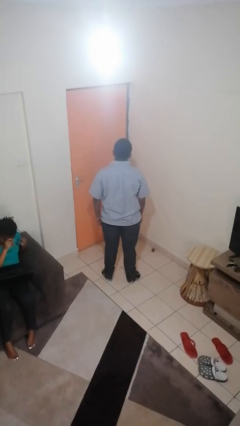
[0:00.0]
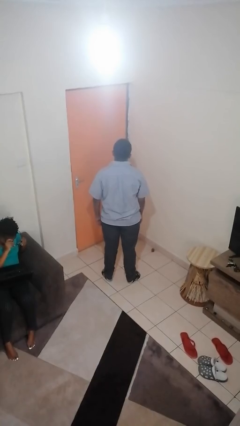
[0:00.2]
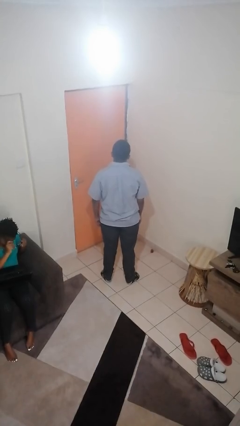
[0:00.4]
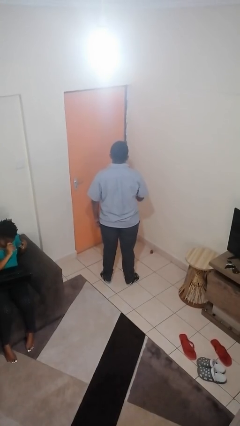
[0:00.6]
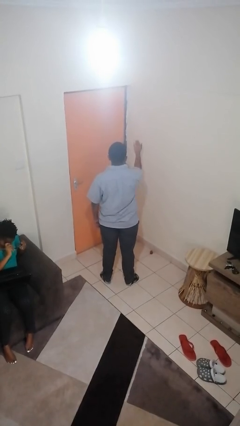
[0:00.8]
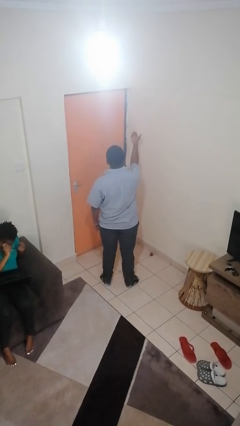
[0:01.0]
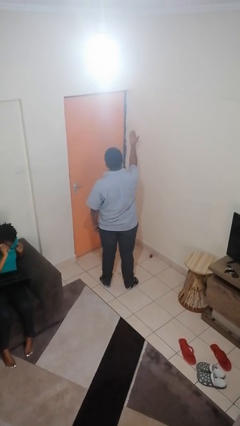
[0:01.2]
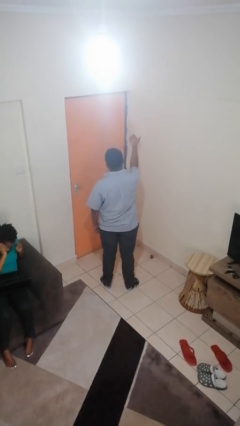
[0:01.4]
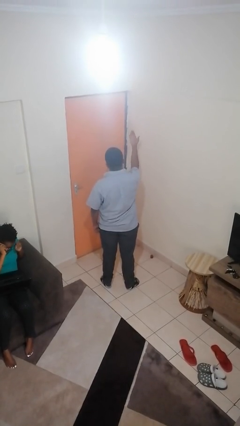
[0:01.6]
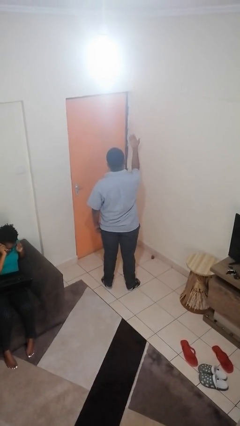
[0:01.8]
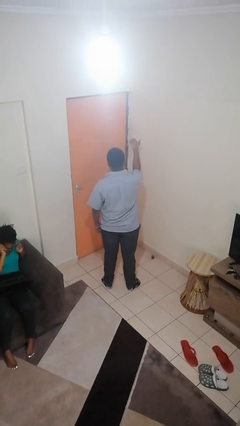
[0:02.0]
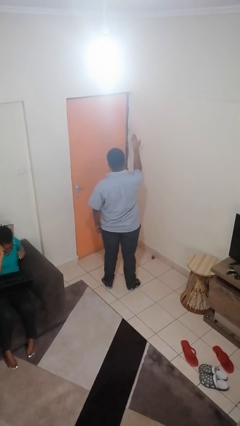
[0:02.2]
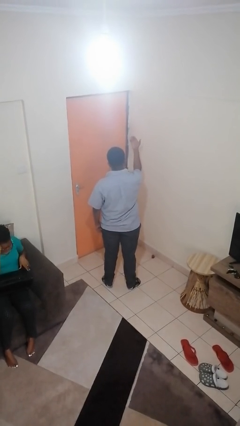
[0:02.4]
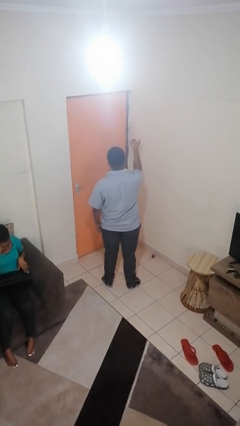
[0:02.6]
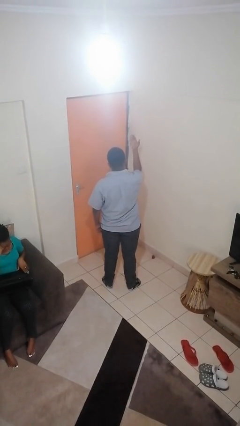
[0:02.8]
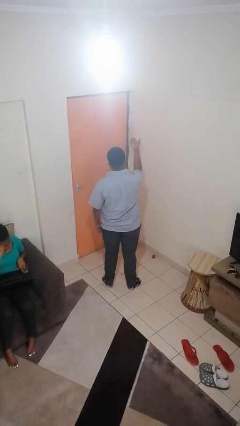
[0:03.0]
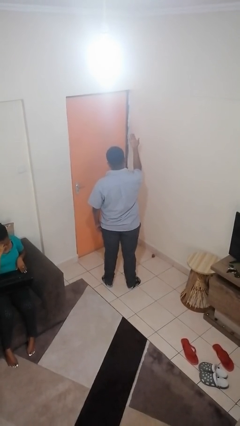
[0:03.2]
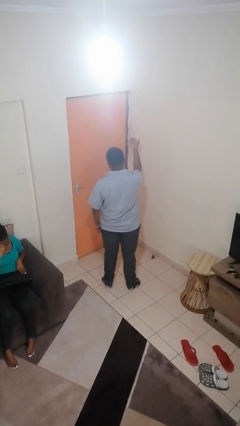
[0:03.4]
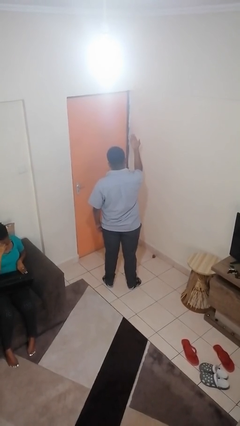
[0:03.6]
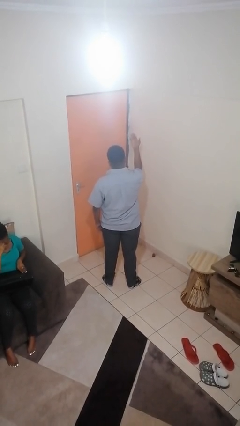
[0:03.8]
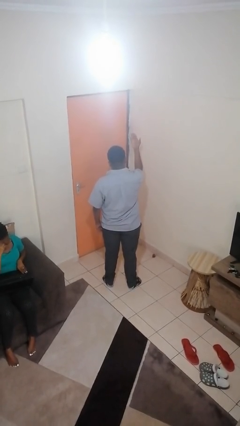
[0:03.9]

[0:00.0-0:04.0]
person gestures come here

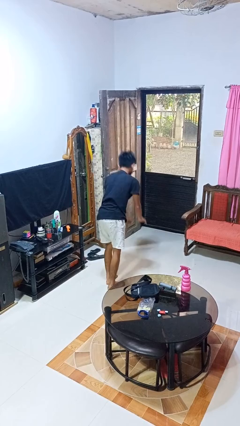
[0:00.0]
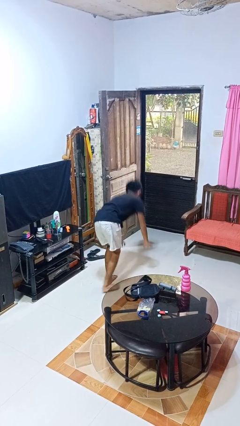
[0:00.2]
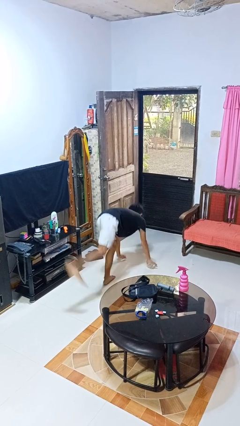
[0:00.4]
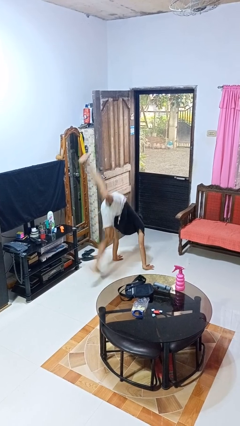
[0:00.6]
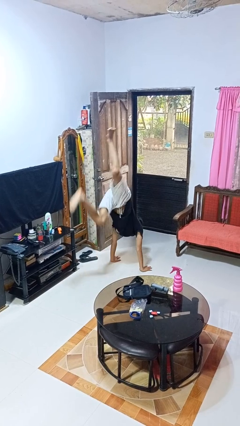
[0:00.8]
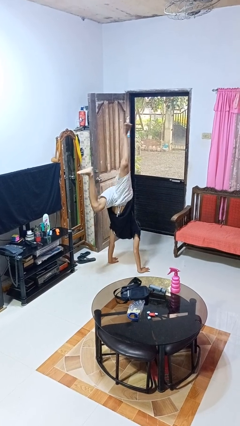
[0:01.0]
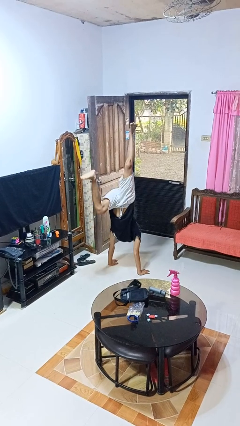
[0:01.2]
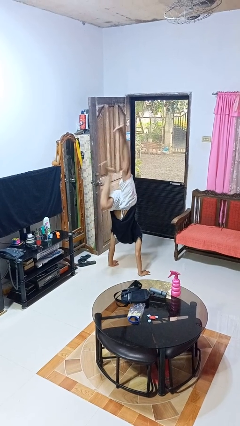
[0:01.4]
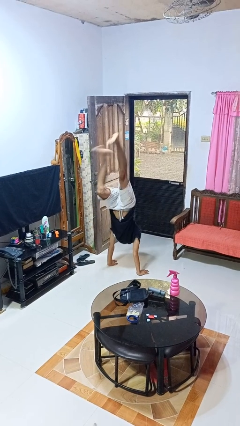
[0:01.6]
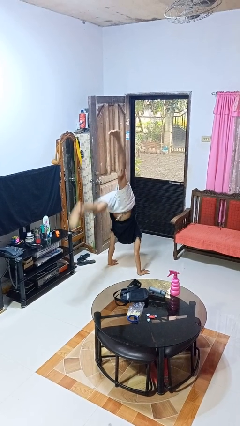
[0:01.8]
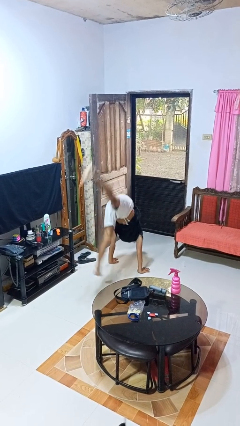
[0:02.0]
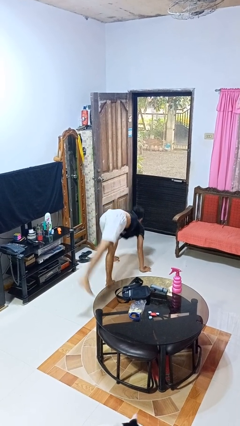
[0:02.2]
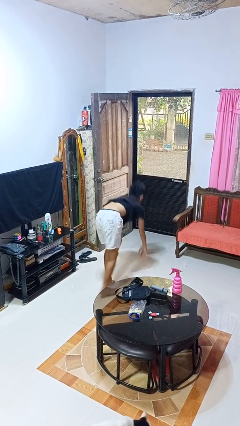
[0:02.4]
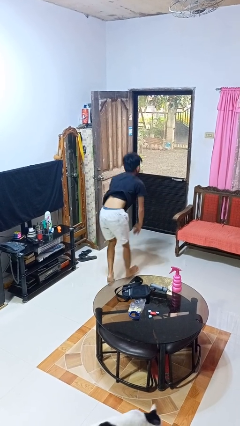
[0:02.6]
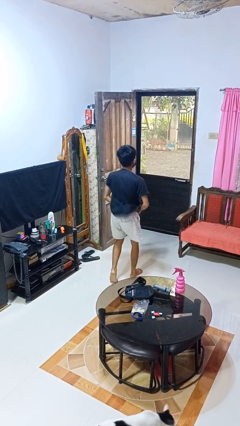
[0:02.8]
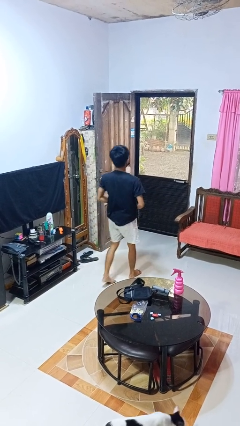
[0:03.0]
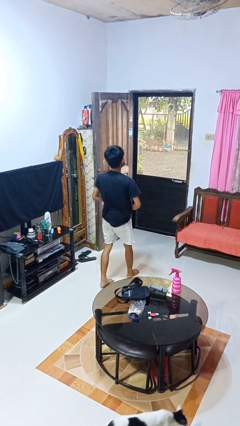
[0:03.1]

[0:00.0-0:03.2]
person handstand

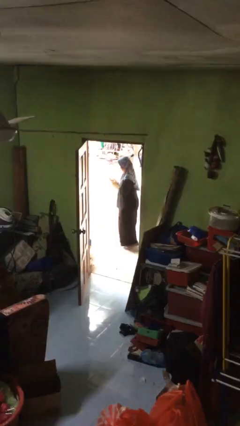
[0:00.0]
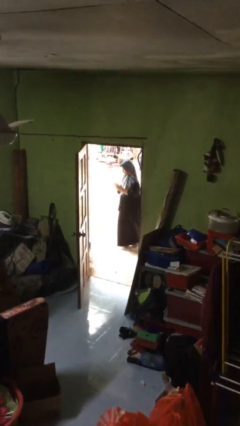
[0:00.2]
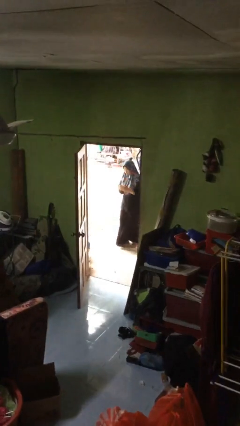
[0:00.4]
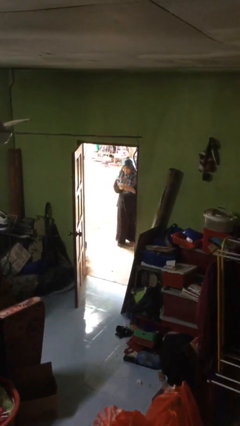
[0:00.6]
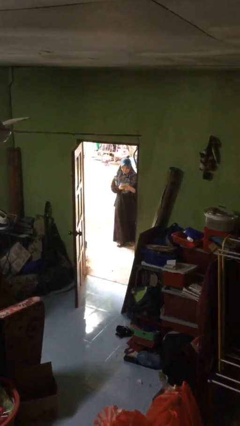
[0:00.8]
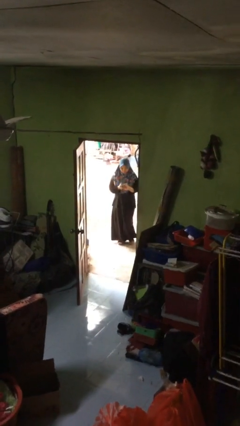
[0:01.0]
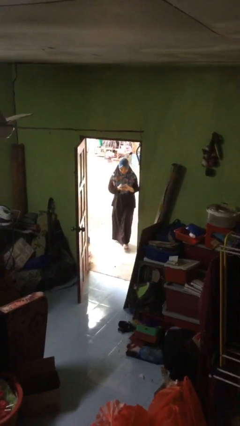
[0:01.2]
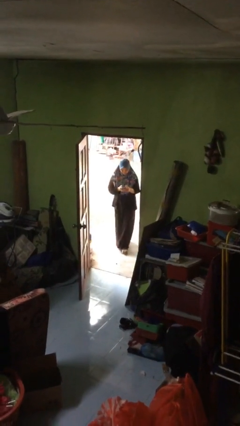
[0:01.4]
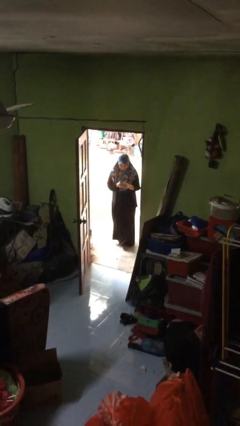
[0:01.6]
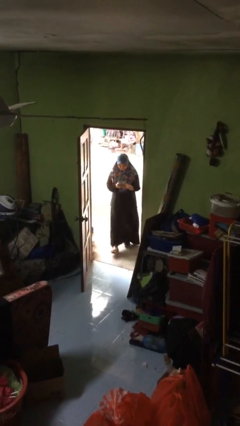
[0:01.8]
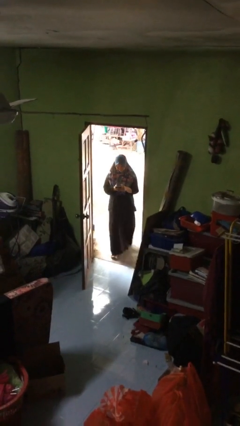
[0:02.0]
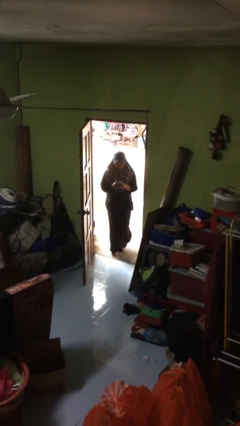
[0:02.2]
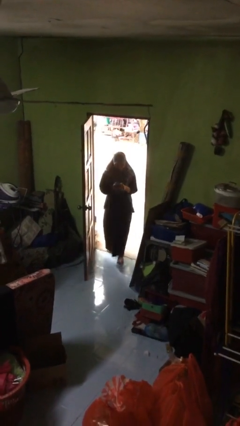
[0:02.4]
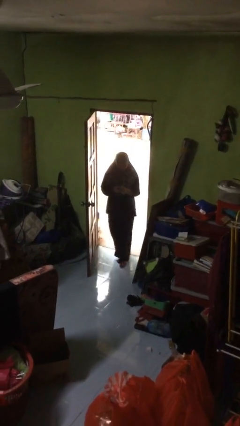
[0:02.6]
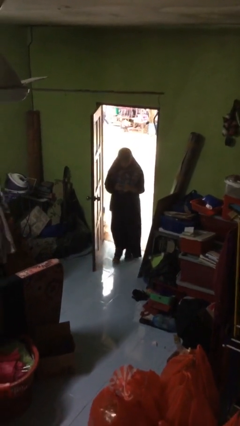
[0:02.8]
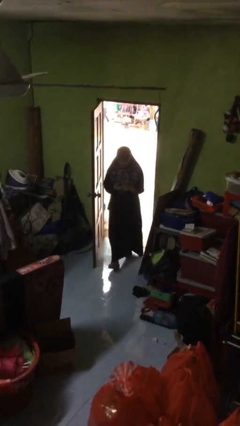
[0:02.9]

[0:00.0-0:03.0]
person enters scene through structure

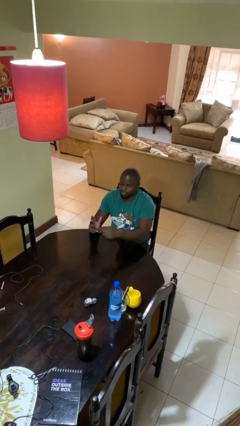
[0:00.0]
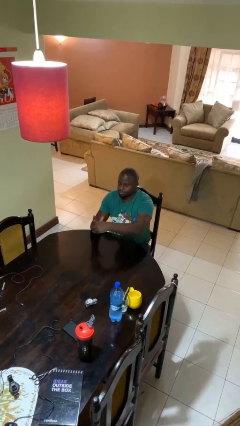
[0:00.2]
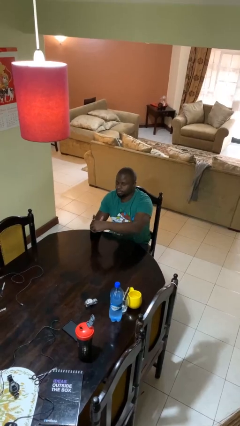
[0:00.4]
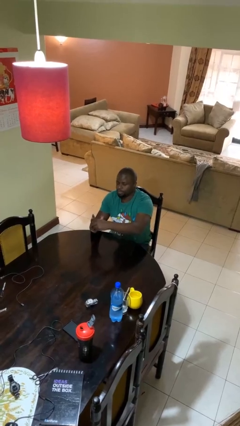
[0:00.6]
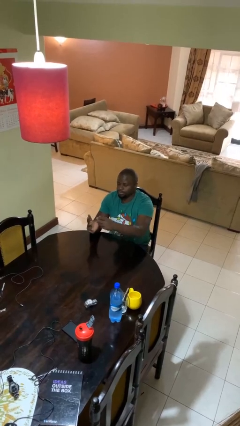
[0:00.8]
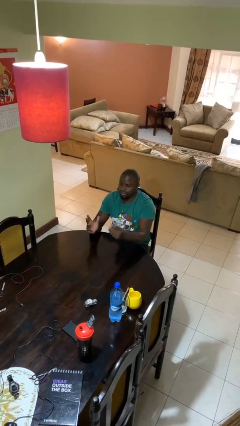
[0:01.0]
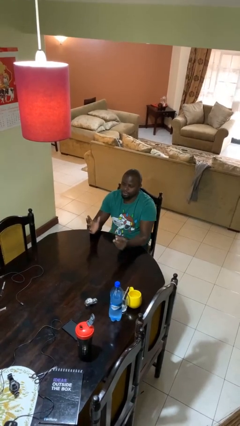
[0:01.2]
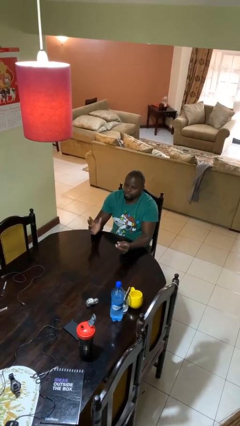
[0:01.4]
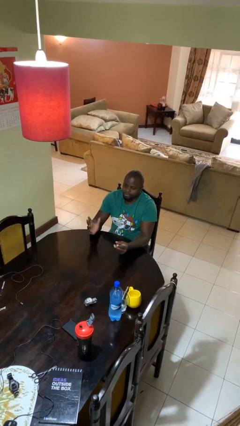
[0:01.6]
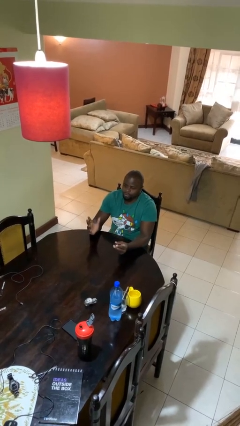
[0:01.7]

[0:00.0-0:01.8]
person takes off ring

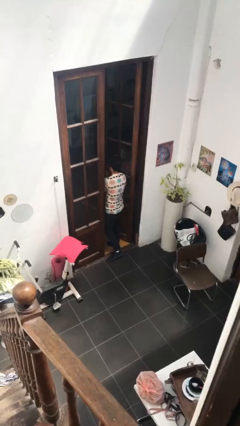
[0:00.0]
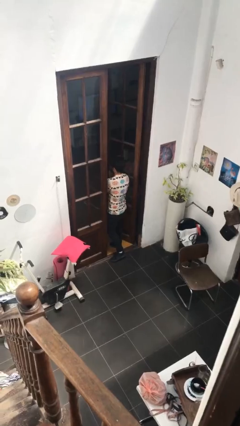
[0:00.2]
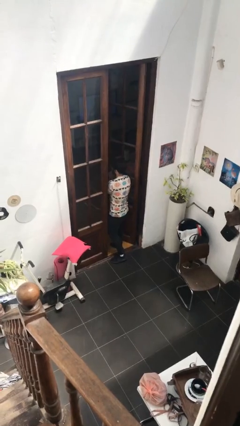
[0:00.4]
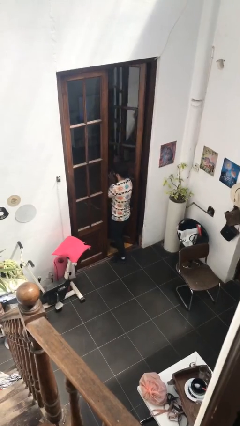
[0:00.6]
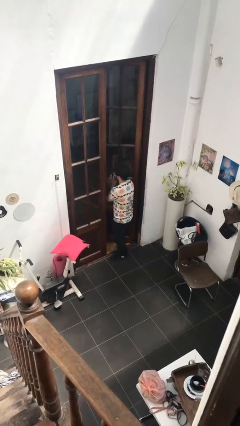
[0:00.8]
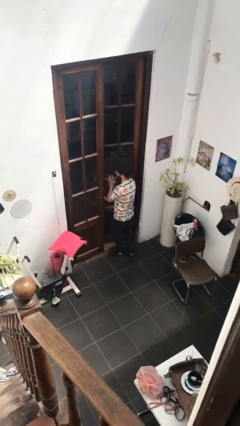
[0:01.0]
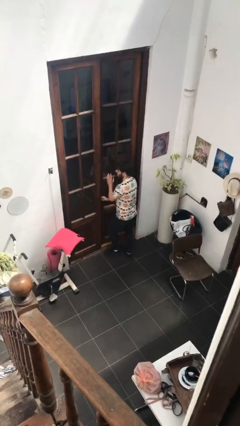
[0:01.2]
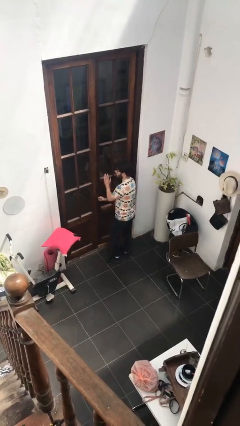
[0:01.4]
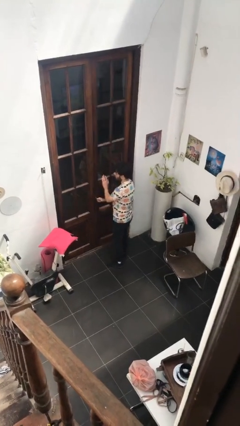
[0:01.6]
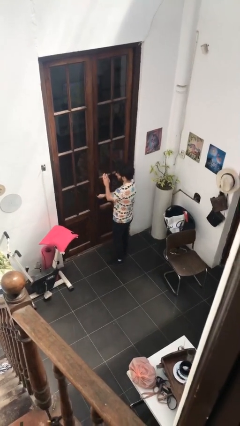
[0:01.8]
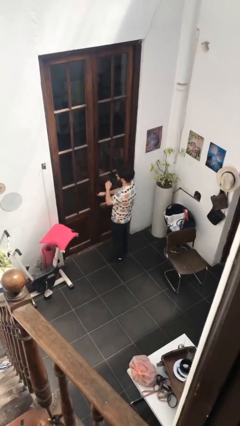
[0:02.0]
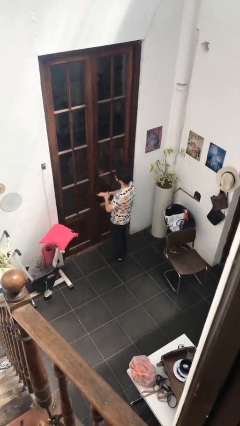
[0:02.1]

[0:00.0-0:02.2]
person closes facility door

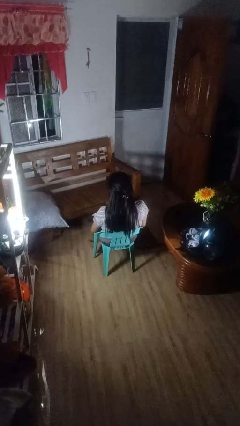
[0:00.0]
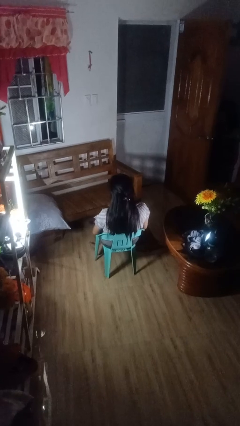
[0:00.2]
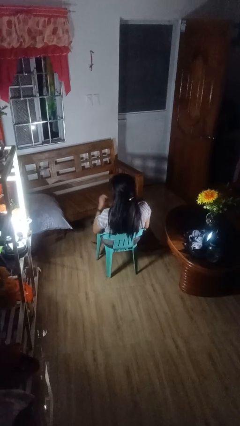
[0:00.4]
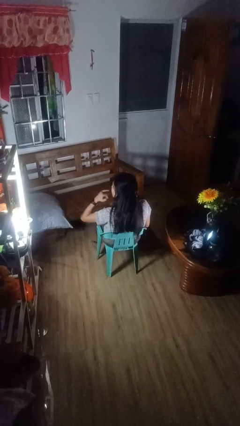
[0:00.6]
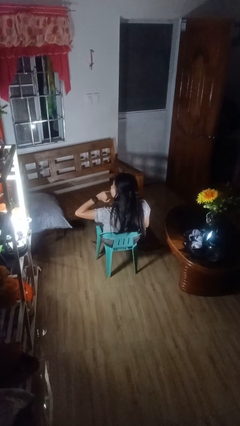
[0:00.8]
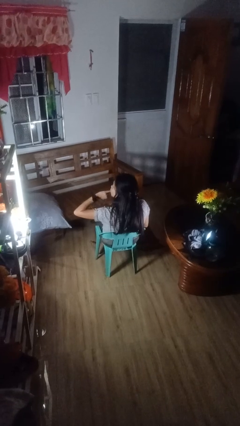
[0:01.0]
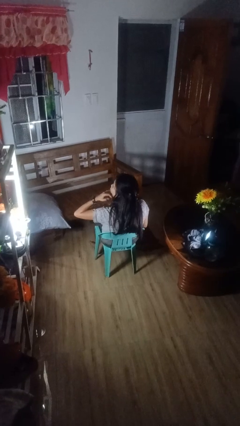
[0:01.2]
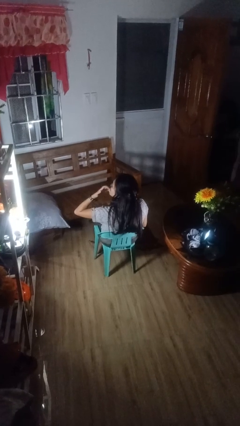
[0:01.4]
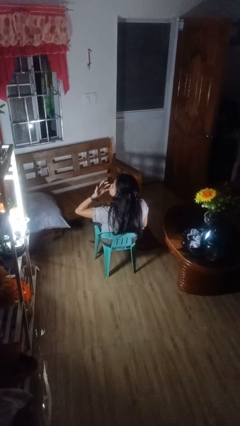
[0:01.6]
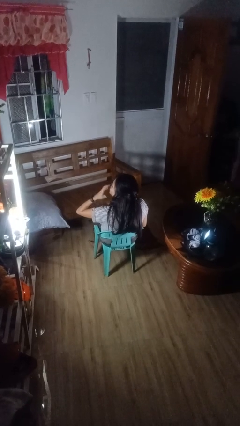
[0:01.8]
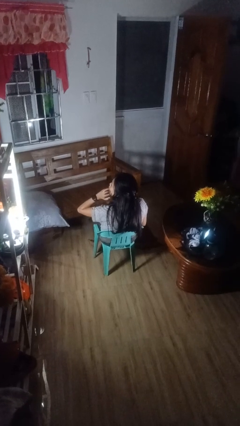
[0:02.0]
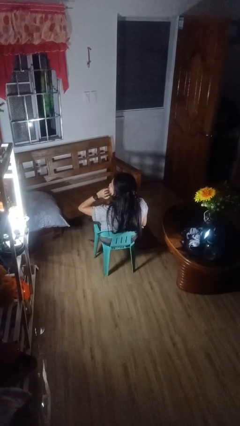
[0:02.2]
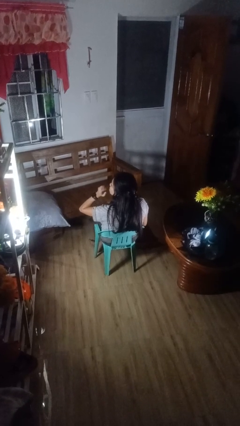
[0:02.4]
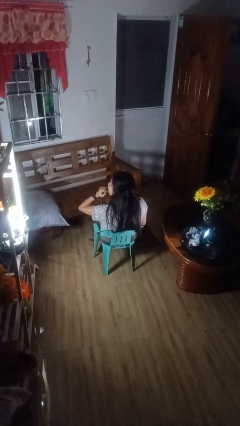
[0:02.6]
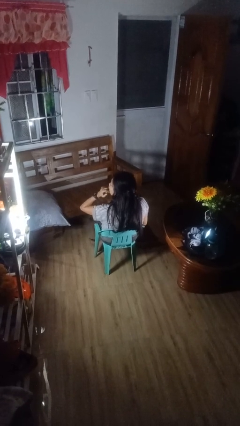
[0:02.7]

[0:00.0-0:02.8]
person licks fingers

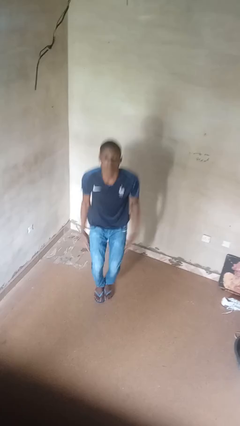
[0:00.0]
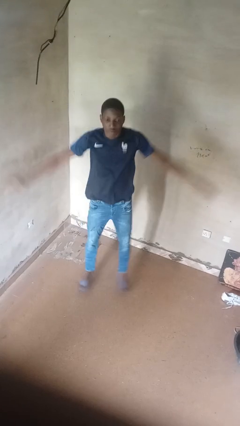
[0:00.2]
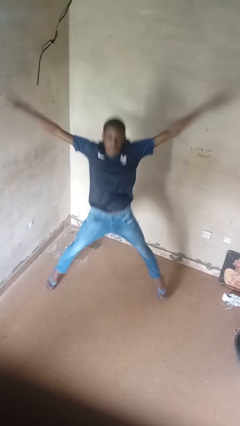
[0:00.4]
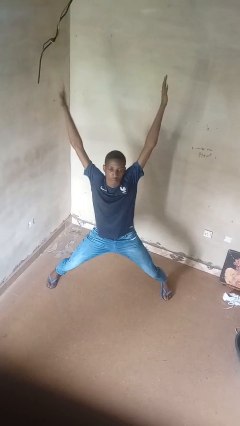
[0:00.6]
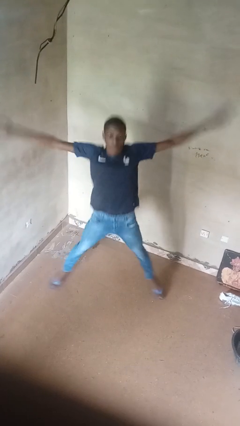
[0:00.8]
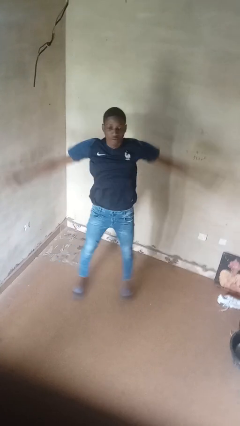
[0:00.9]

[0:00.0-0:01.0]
person exercises with jumping jacks
